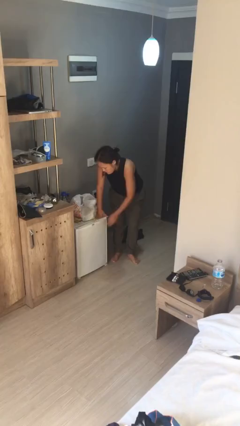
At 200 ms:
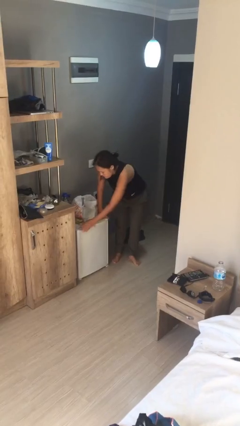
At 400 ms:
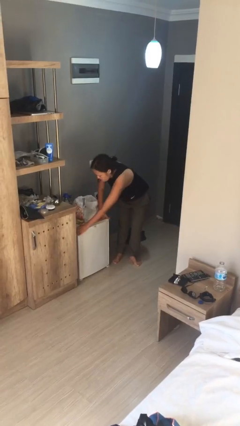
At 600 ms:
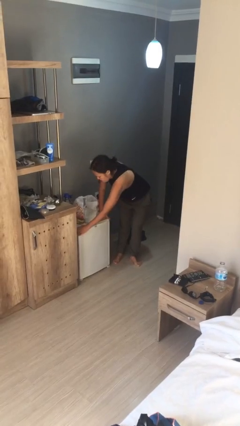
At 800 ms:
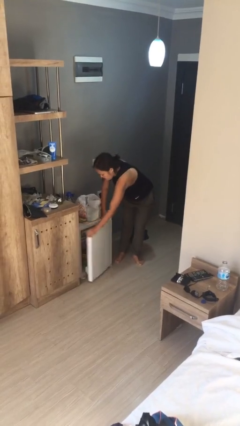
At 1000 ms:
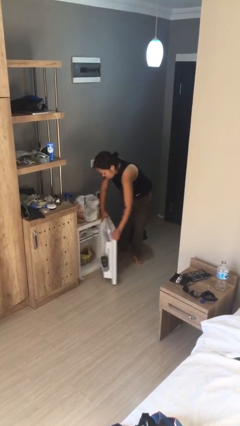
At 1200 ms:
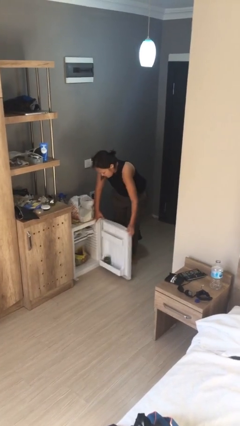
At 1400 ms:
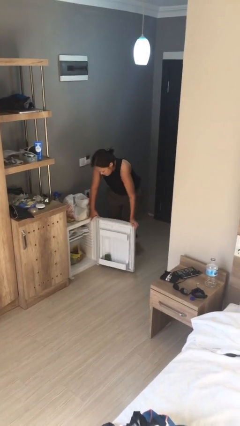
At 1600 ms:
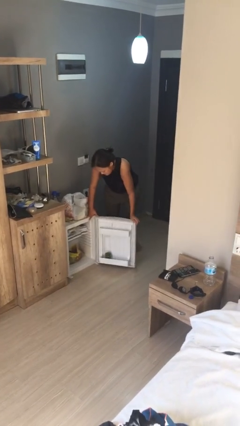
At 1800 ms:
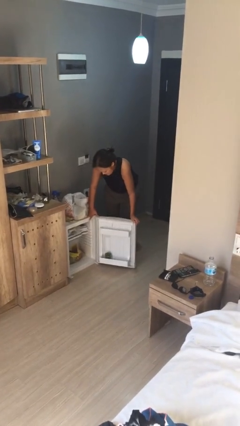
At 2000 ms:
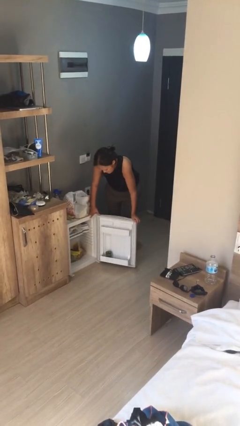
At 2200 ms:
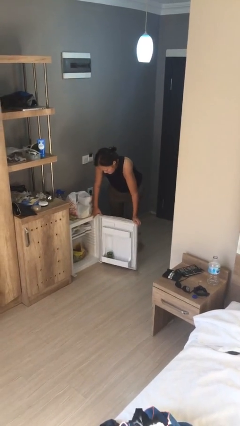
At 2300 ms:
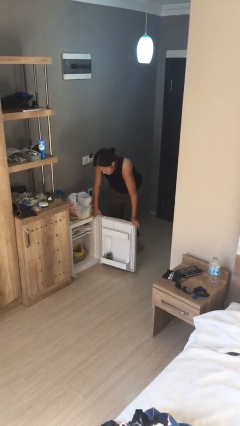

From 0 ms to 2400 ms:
person opens refrigerator

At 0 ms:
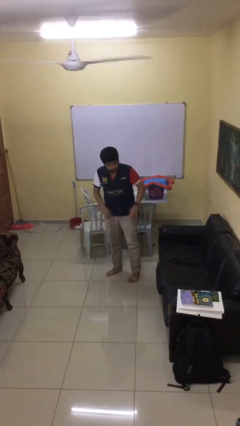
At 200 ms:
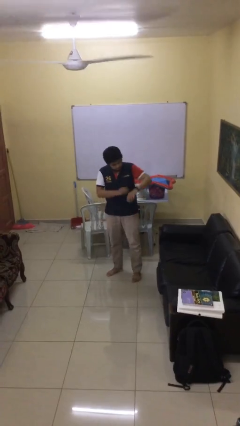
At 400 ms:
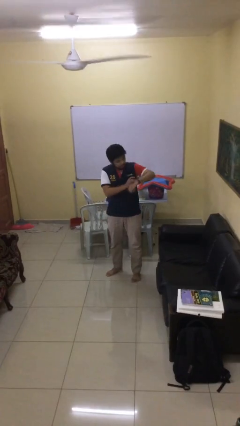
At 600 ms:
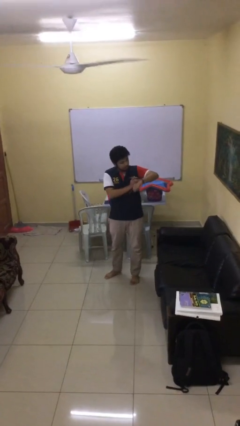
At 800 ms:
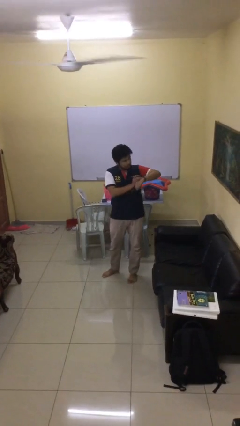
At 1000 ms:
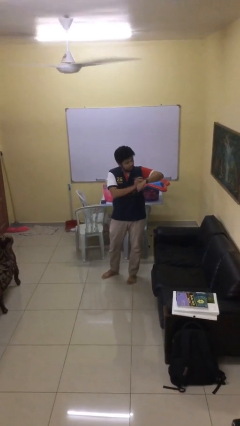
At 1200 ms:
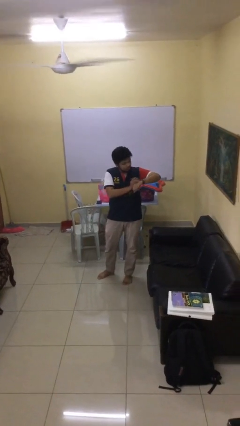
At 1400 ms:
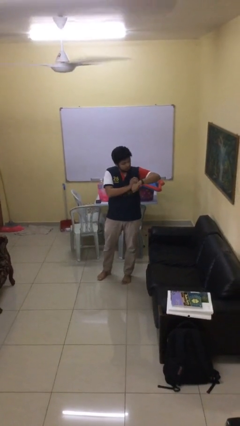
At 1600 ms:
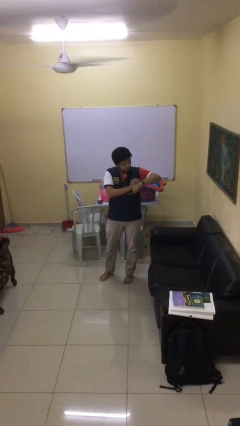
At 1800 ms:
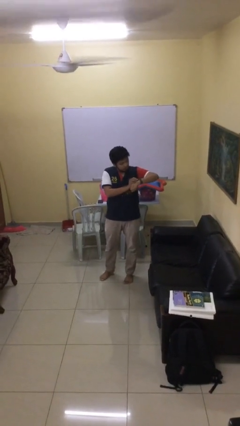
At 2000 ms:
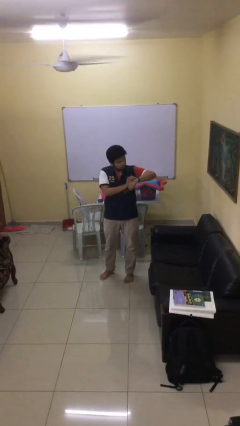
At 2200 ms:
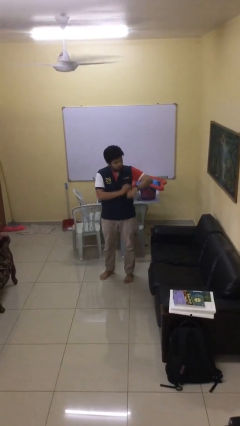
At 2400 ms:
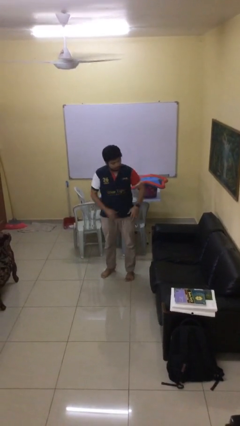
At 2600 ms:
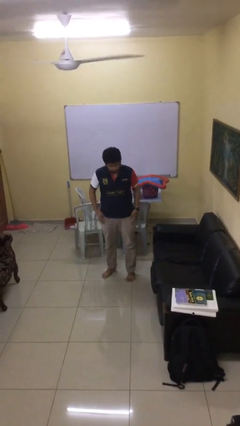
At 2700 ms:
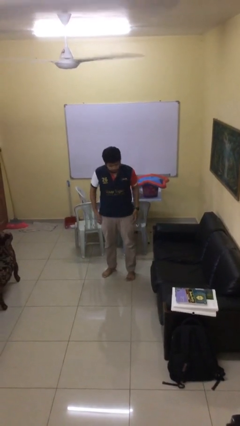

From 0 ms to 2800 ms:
person looks at wristwatch

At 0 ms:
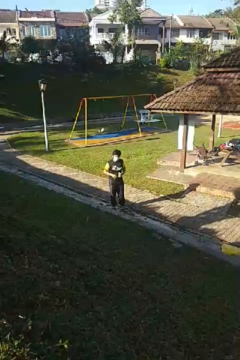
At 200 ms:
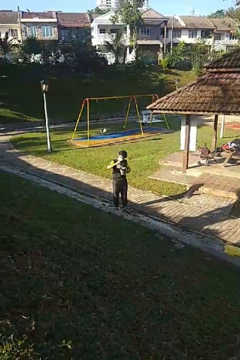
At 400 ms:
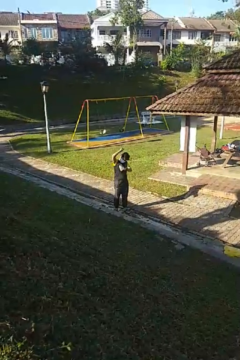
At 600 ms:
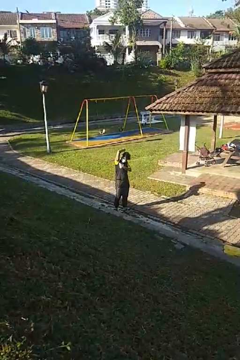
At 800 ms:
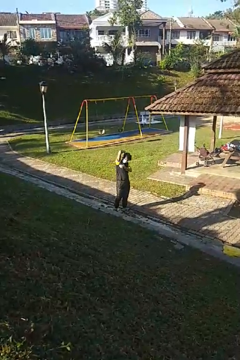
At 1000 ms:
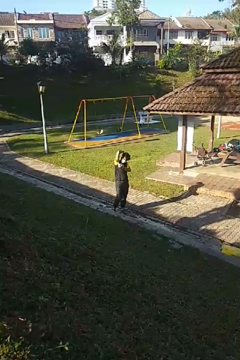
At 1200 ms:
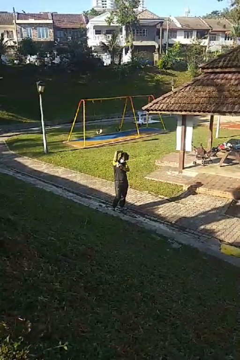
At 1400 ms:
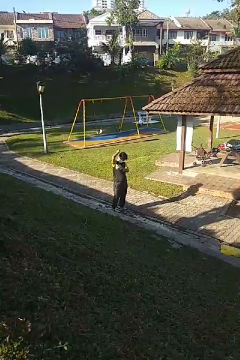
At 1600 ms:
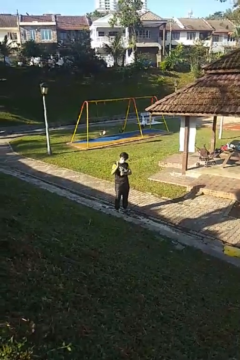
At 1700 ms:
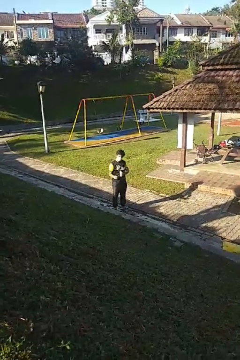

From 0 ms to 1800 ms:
person applies deodorant

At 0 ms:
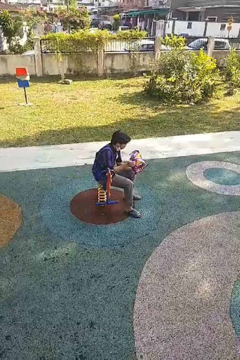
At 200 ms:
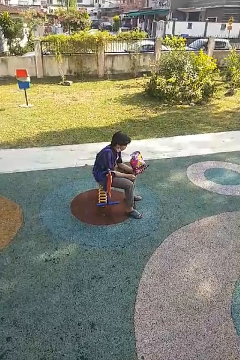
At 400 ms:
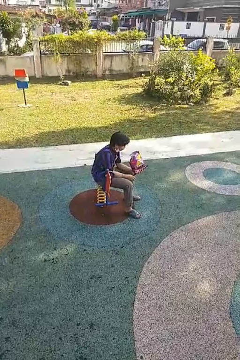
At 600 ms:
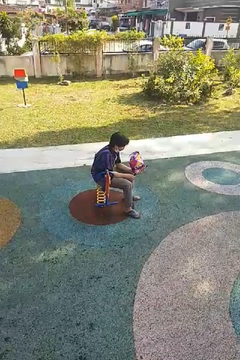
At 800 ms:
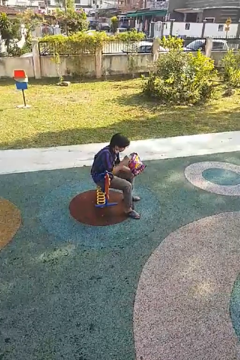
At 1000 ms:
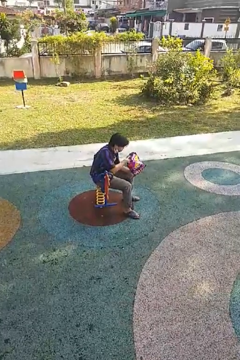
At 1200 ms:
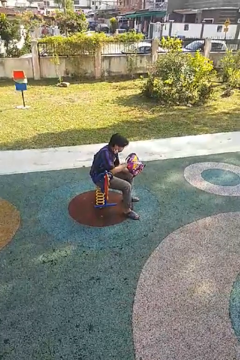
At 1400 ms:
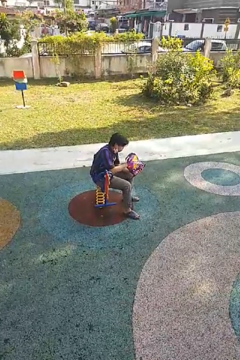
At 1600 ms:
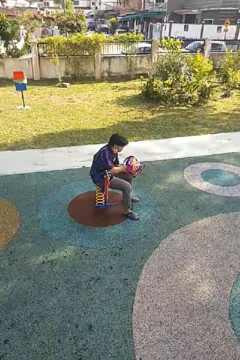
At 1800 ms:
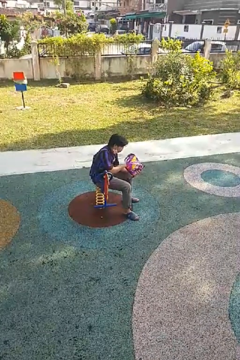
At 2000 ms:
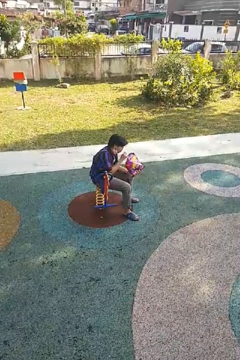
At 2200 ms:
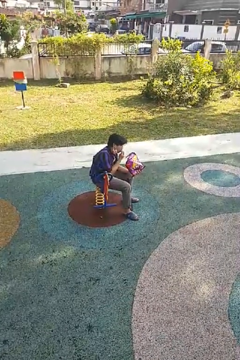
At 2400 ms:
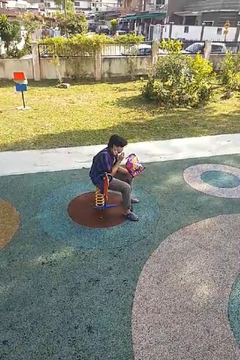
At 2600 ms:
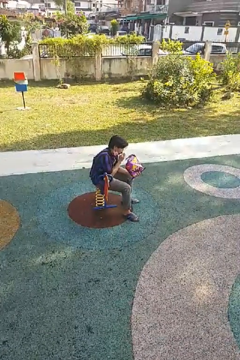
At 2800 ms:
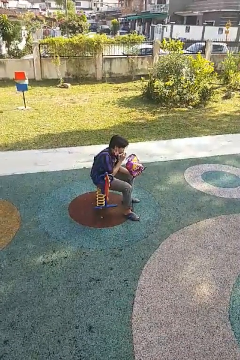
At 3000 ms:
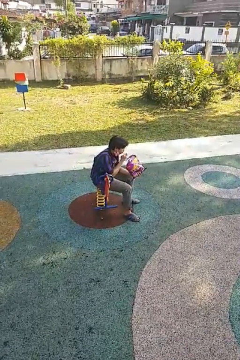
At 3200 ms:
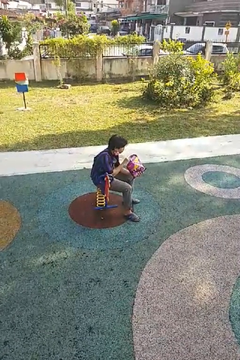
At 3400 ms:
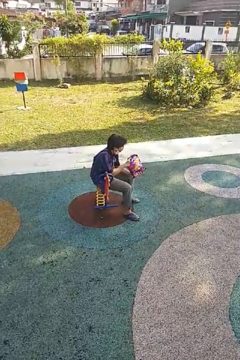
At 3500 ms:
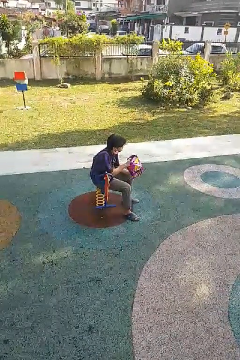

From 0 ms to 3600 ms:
person eats snack from bag

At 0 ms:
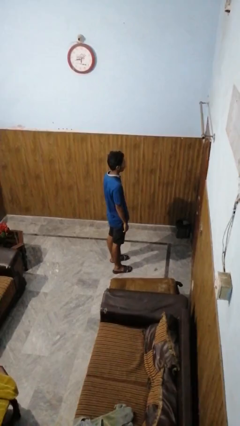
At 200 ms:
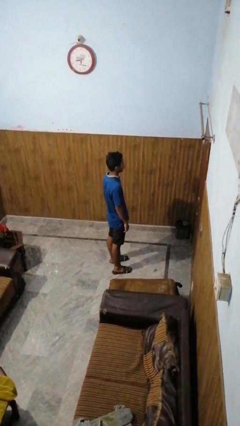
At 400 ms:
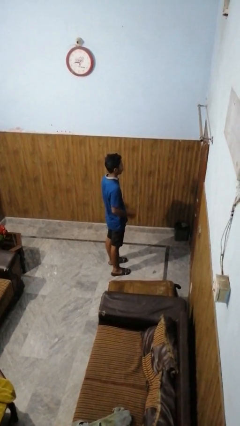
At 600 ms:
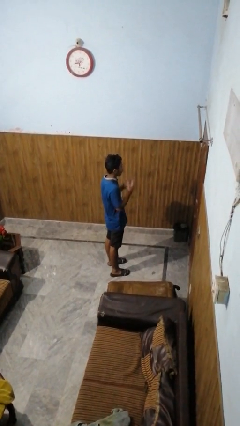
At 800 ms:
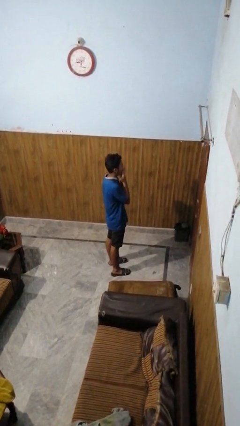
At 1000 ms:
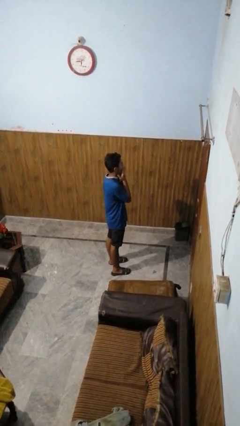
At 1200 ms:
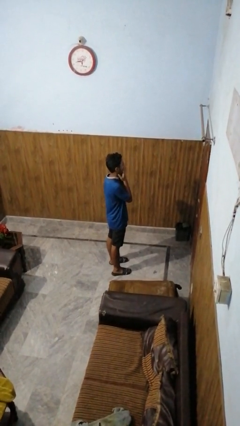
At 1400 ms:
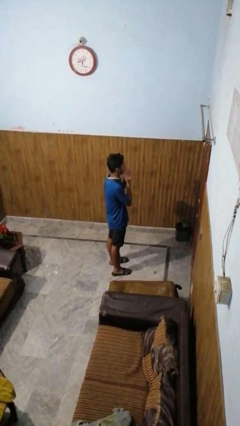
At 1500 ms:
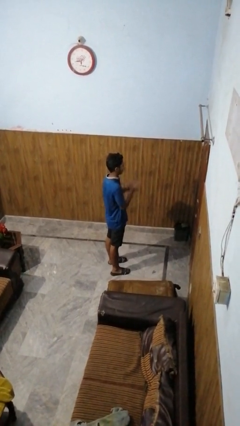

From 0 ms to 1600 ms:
person covers face with hands

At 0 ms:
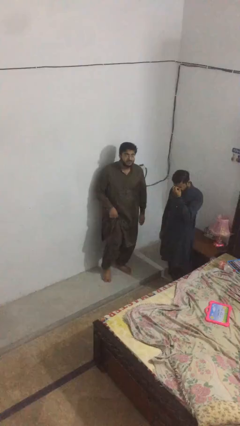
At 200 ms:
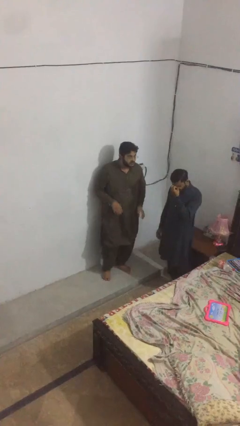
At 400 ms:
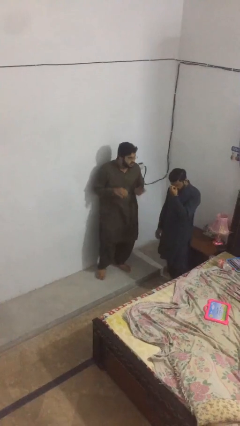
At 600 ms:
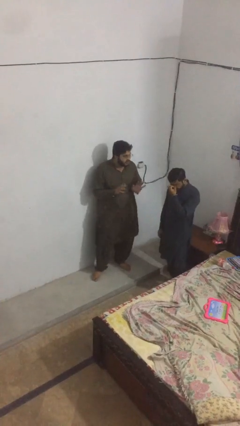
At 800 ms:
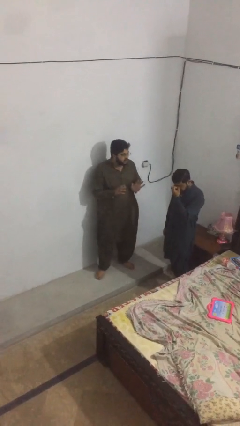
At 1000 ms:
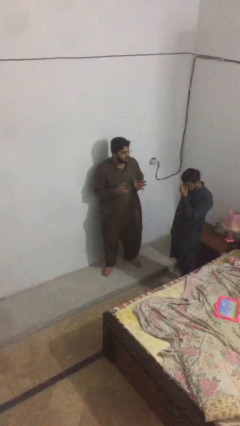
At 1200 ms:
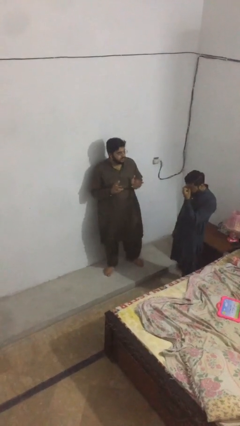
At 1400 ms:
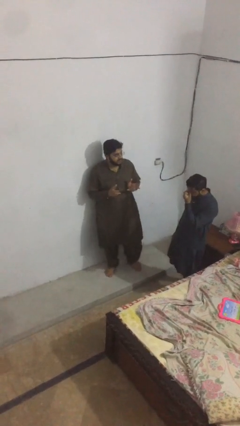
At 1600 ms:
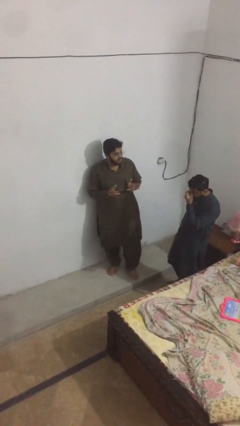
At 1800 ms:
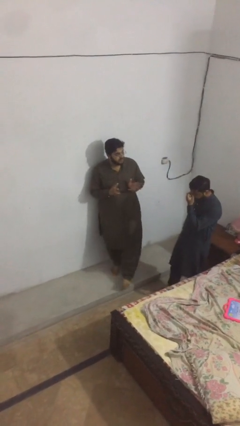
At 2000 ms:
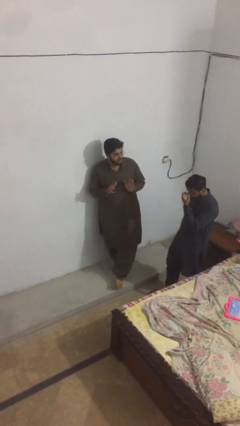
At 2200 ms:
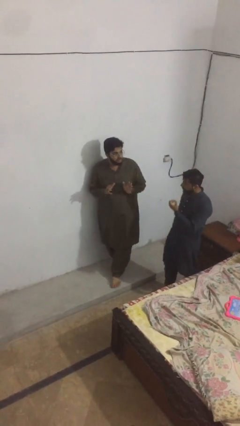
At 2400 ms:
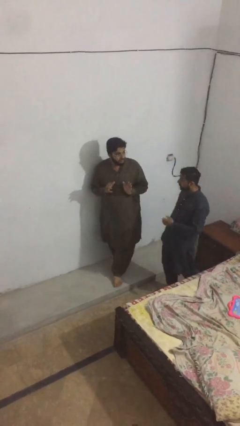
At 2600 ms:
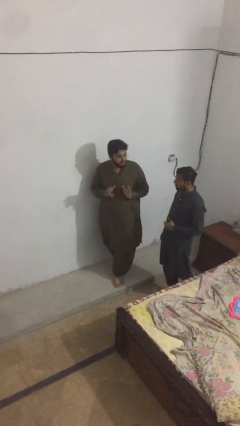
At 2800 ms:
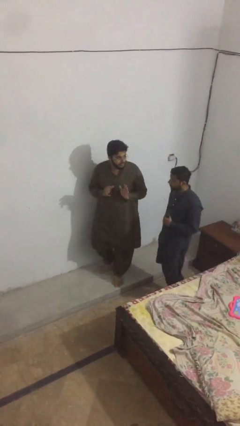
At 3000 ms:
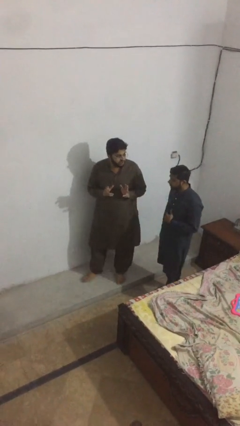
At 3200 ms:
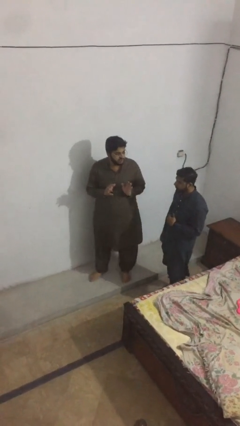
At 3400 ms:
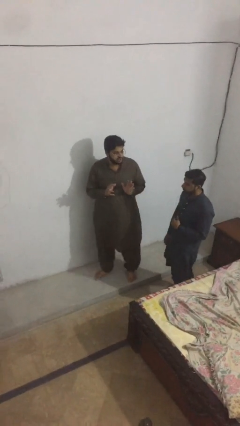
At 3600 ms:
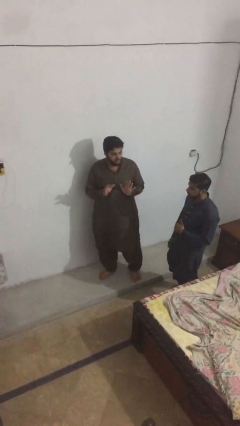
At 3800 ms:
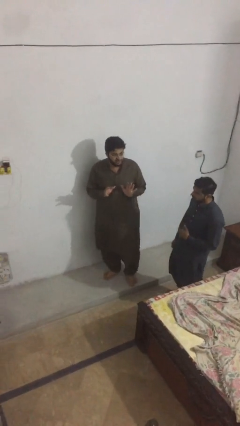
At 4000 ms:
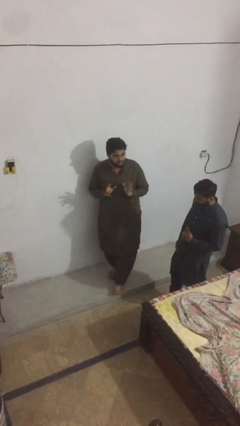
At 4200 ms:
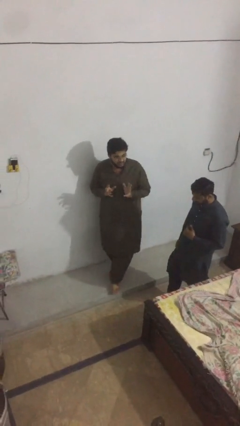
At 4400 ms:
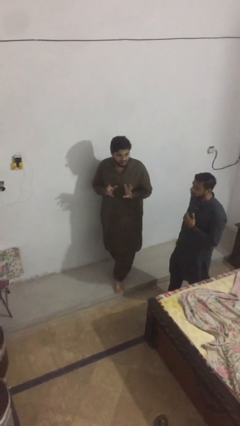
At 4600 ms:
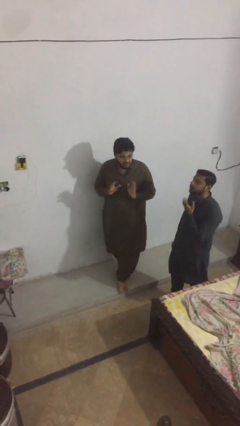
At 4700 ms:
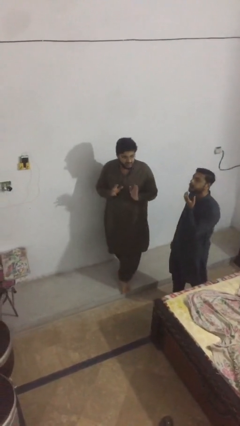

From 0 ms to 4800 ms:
person talks to person

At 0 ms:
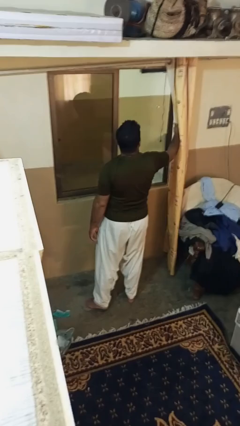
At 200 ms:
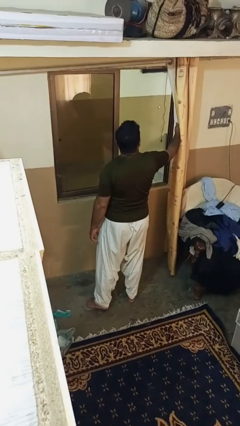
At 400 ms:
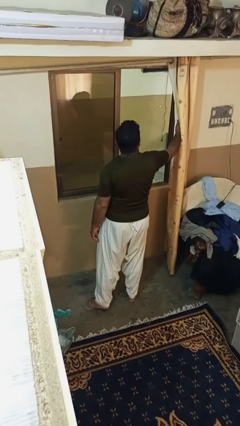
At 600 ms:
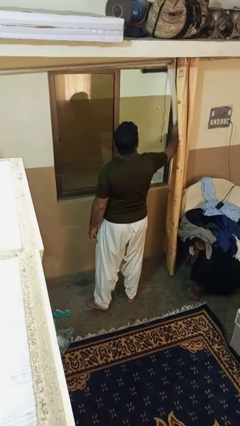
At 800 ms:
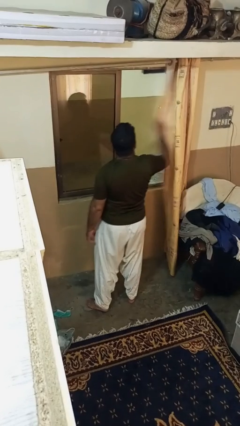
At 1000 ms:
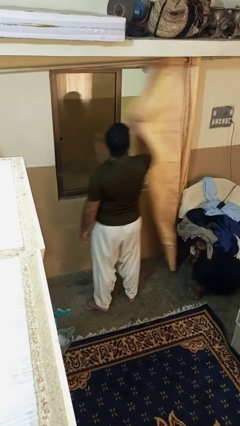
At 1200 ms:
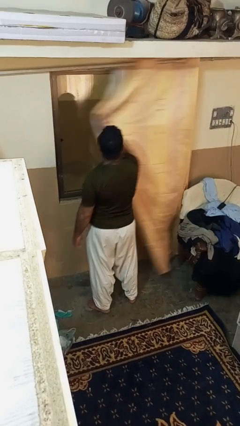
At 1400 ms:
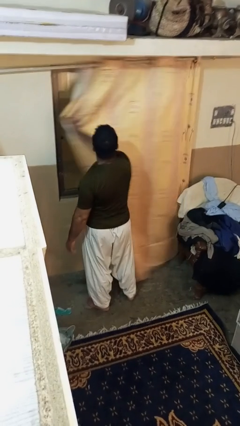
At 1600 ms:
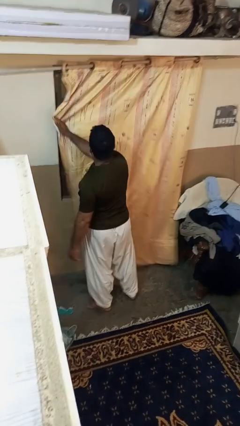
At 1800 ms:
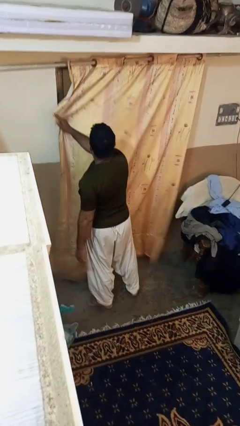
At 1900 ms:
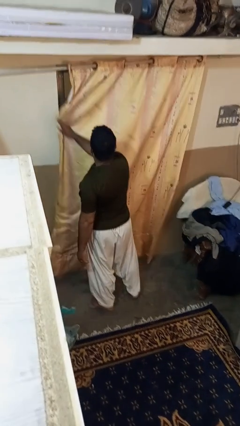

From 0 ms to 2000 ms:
person closes curtains
